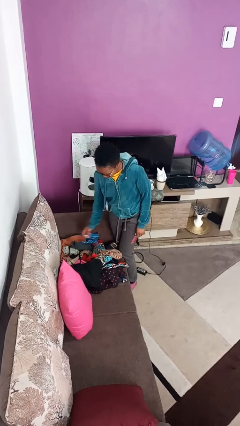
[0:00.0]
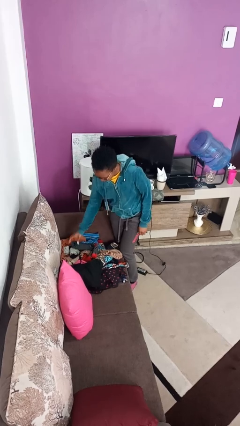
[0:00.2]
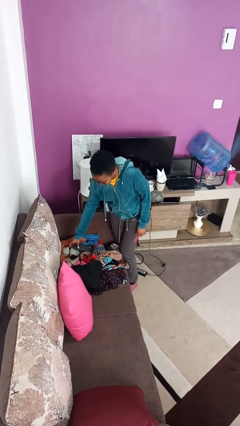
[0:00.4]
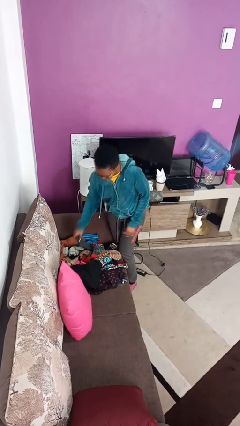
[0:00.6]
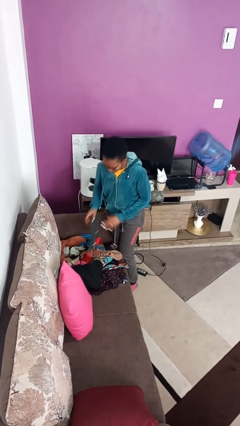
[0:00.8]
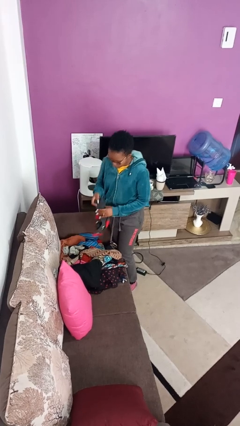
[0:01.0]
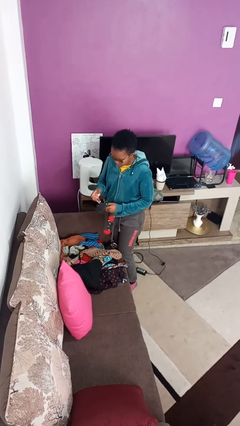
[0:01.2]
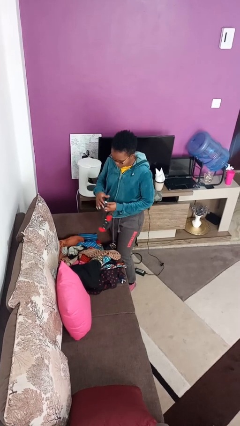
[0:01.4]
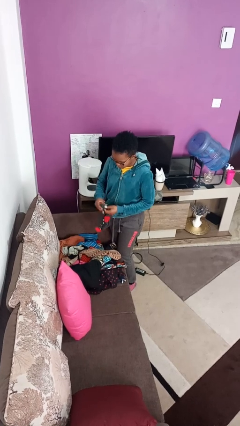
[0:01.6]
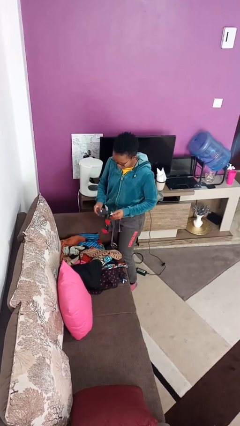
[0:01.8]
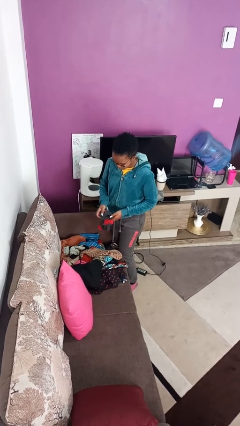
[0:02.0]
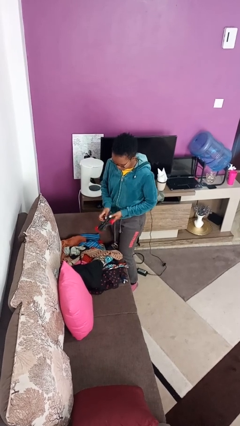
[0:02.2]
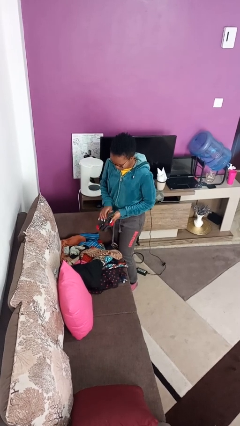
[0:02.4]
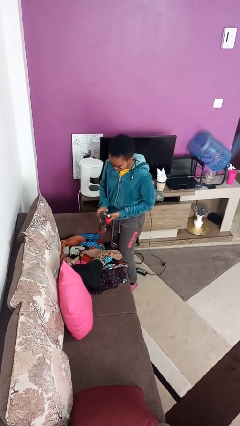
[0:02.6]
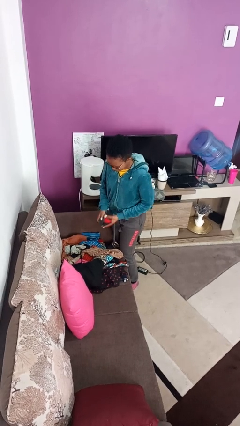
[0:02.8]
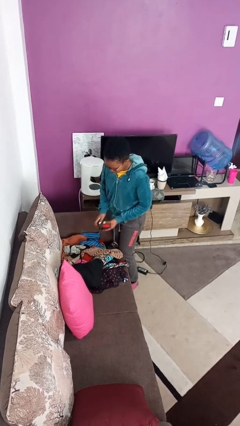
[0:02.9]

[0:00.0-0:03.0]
person folds socks

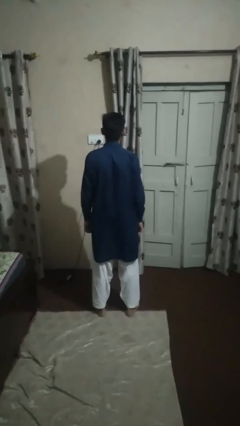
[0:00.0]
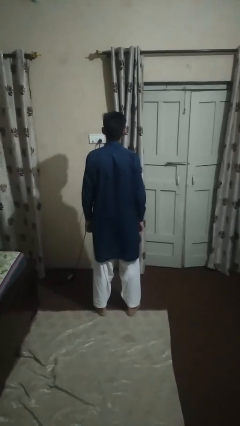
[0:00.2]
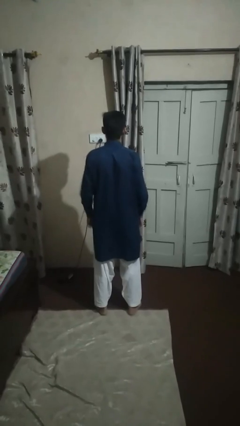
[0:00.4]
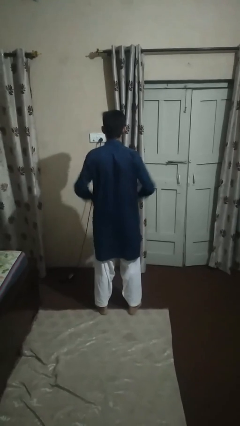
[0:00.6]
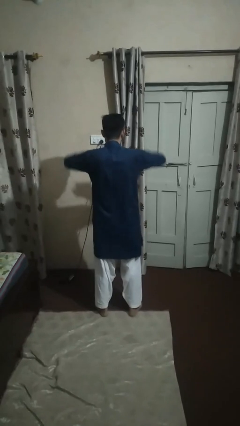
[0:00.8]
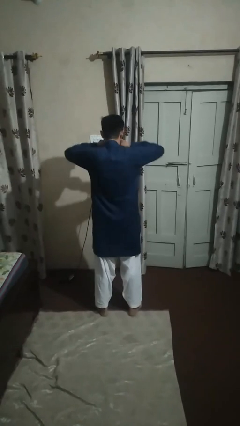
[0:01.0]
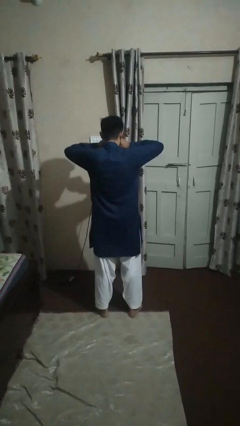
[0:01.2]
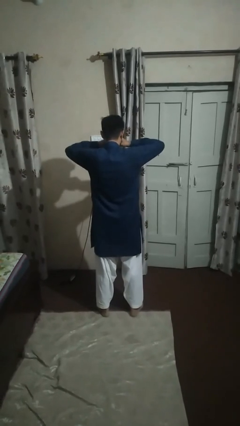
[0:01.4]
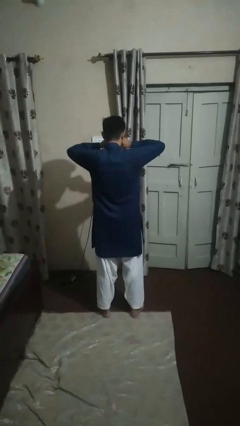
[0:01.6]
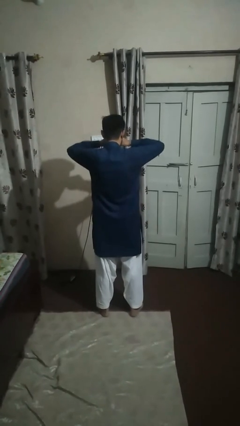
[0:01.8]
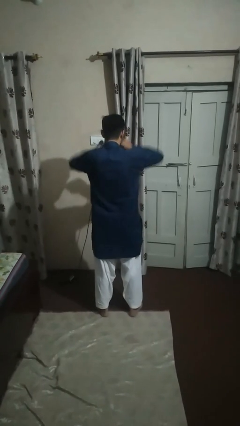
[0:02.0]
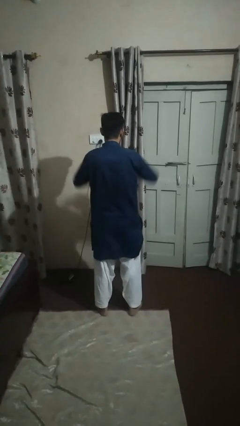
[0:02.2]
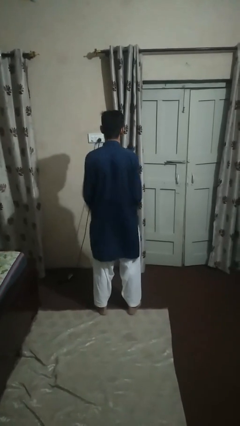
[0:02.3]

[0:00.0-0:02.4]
person rubs eyes

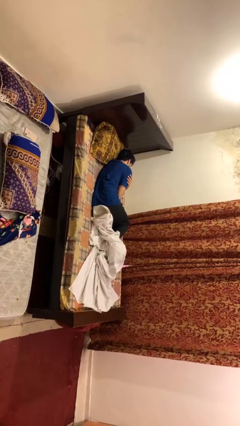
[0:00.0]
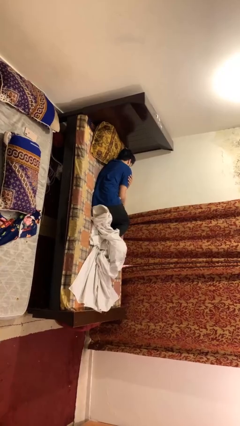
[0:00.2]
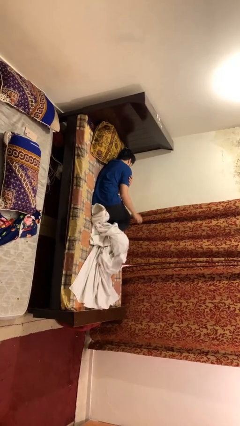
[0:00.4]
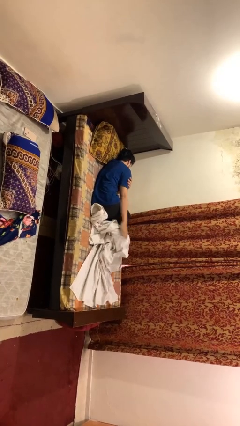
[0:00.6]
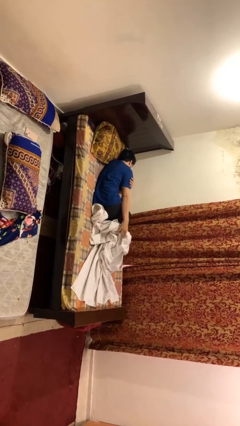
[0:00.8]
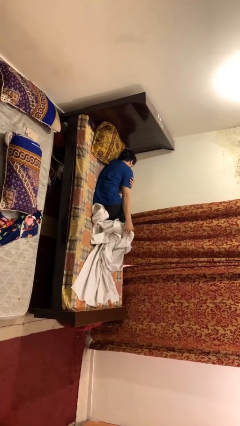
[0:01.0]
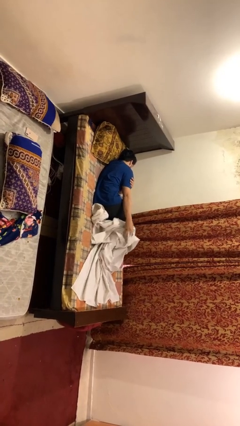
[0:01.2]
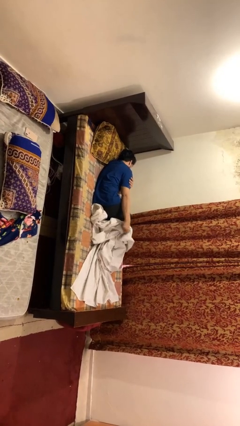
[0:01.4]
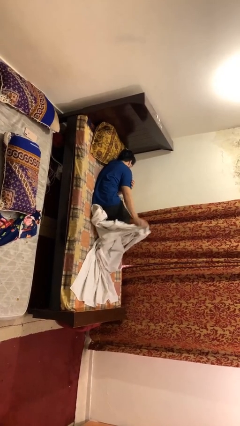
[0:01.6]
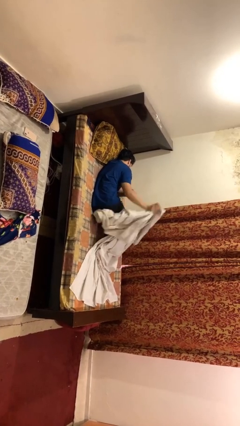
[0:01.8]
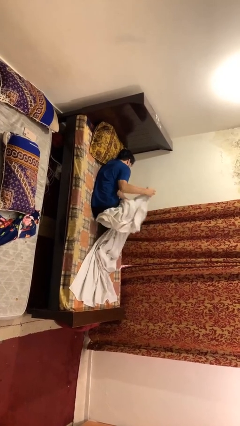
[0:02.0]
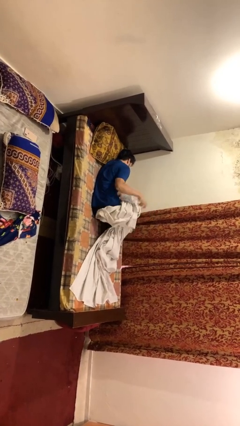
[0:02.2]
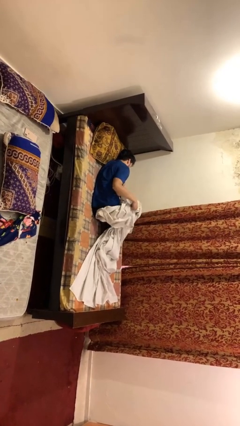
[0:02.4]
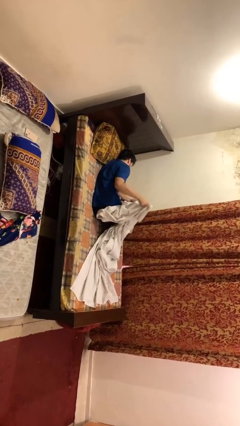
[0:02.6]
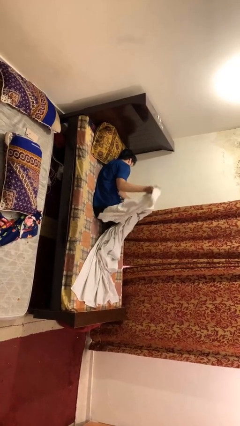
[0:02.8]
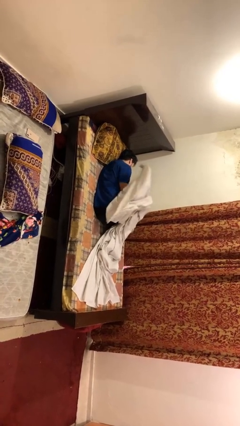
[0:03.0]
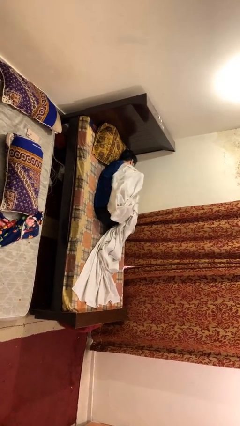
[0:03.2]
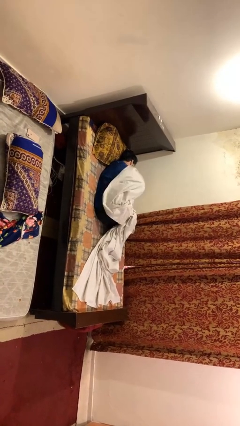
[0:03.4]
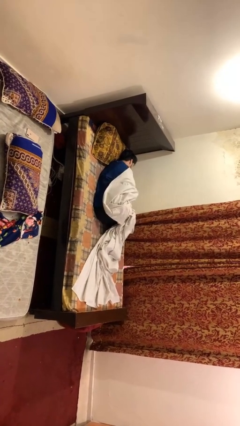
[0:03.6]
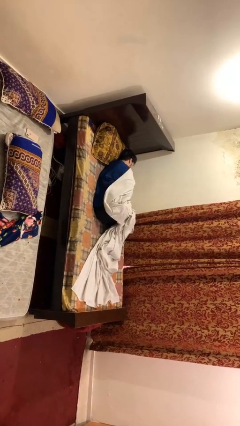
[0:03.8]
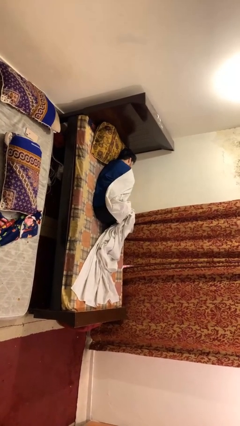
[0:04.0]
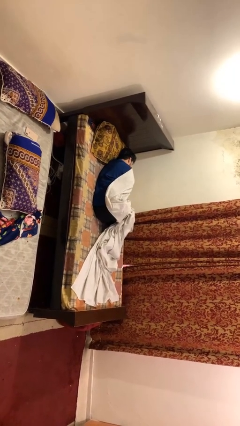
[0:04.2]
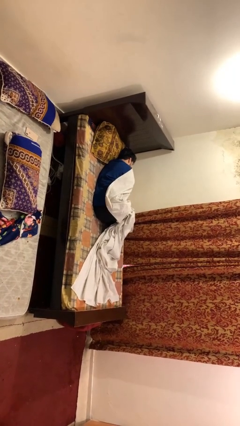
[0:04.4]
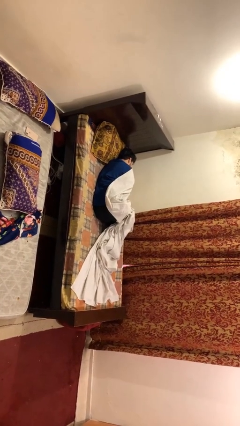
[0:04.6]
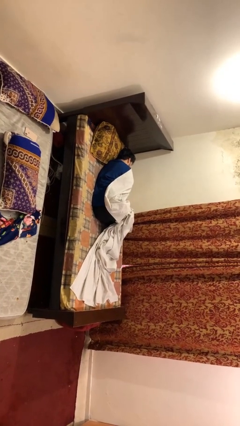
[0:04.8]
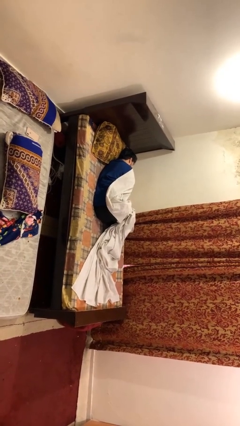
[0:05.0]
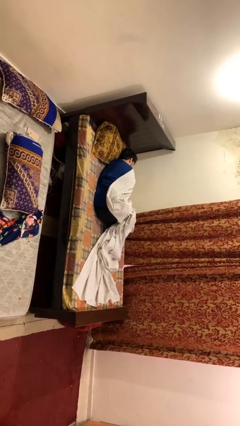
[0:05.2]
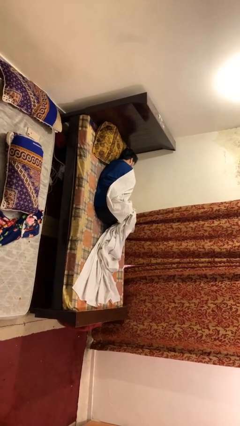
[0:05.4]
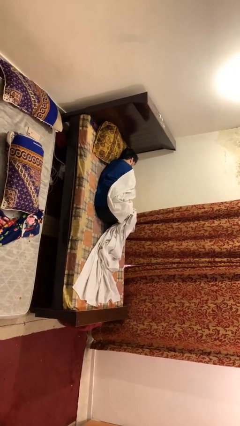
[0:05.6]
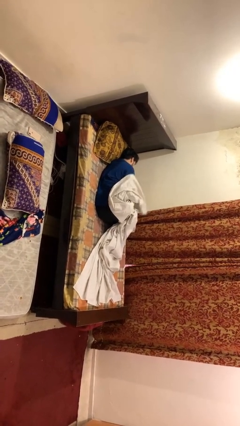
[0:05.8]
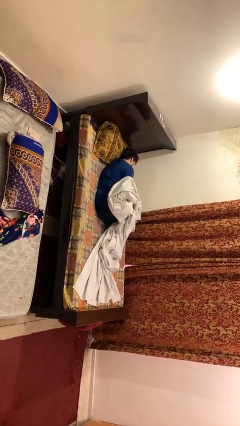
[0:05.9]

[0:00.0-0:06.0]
person covers with bedsheets

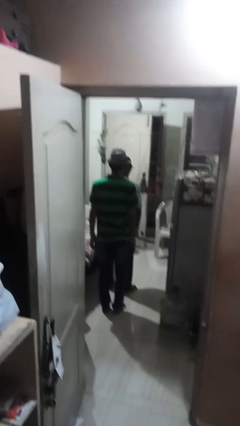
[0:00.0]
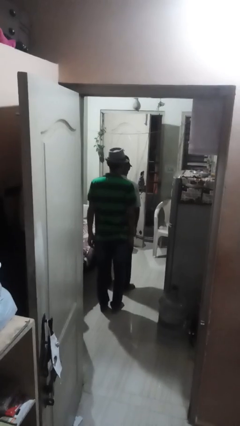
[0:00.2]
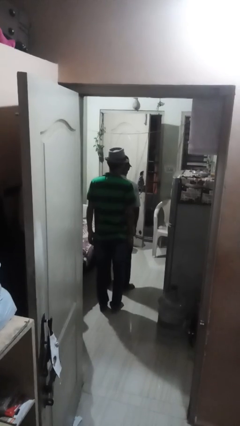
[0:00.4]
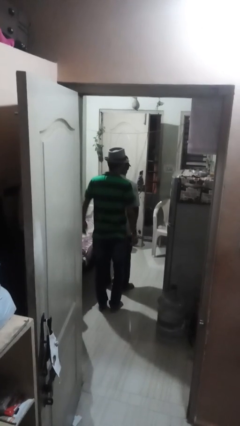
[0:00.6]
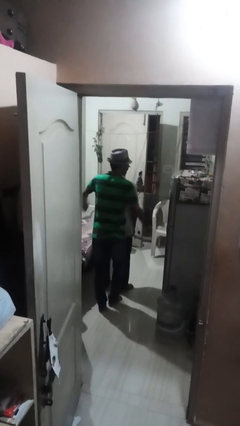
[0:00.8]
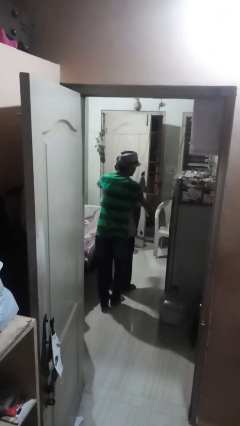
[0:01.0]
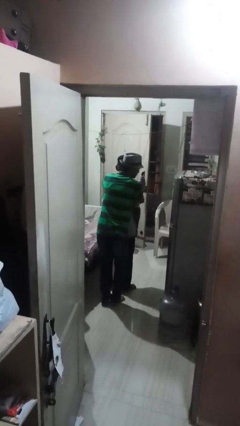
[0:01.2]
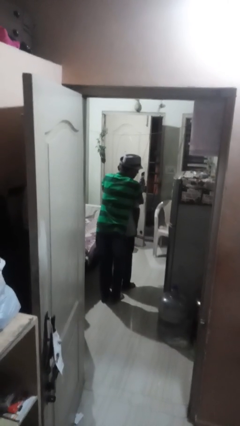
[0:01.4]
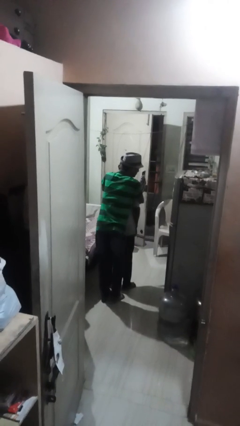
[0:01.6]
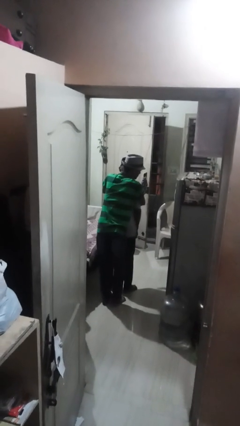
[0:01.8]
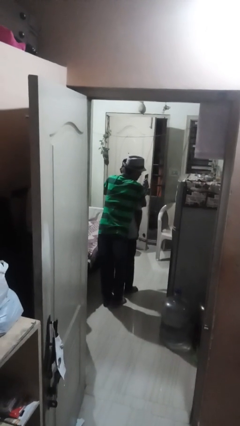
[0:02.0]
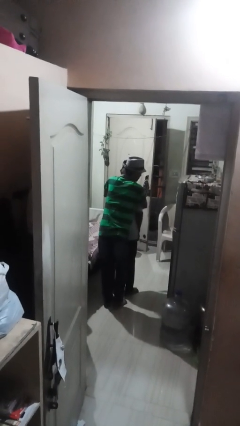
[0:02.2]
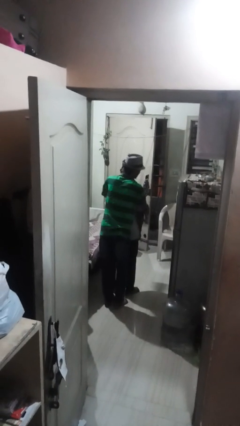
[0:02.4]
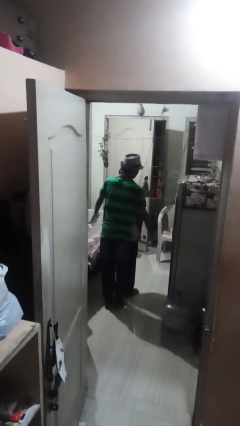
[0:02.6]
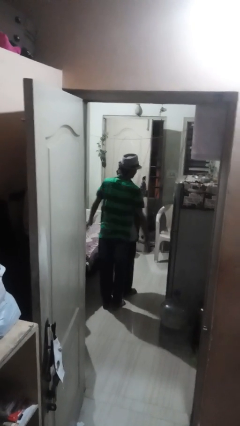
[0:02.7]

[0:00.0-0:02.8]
person hugs person from behind

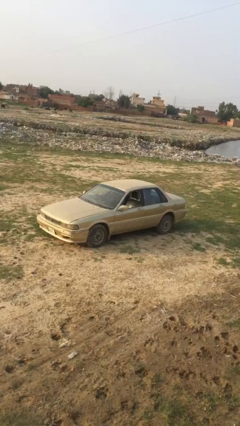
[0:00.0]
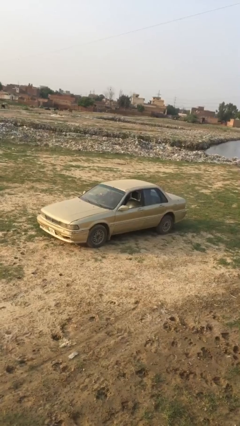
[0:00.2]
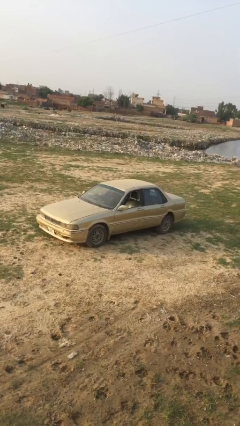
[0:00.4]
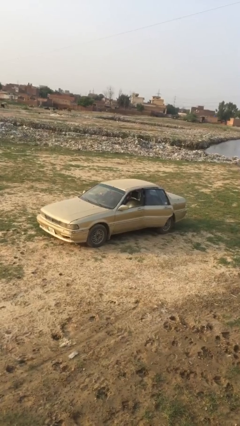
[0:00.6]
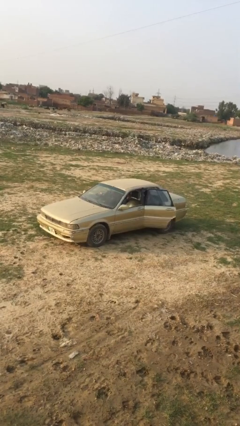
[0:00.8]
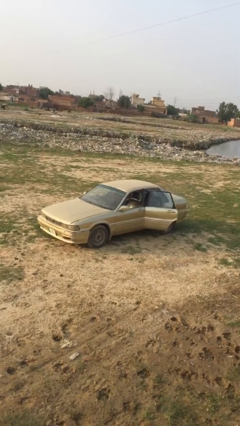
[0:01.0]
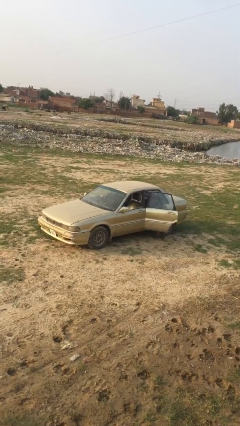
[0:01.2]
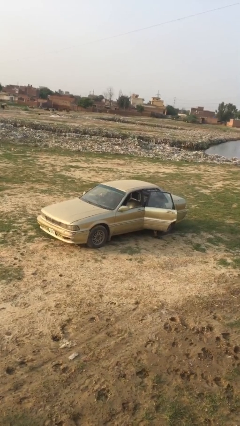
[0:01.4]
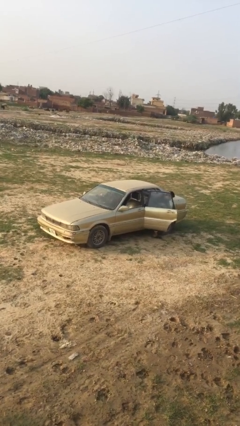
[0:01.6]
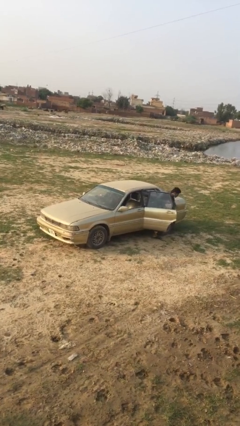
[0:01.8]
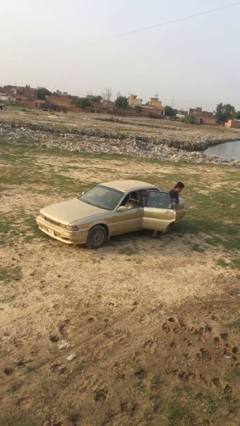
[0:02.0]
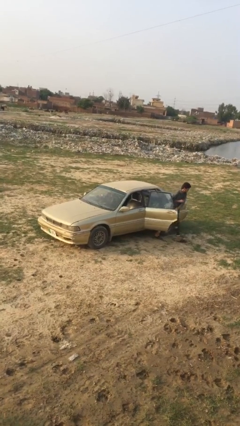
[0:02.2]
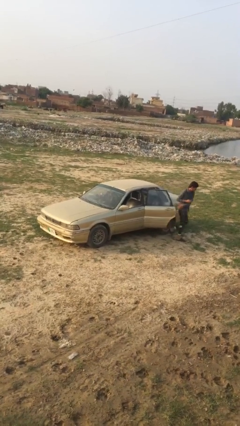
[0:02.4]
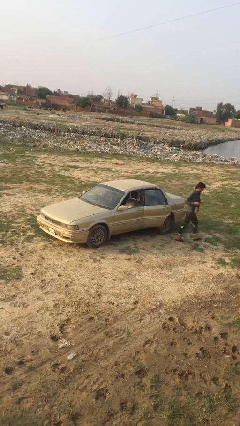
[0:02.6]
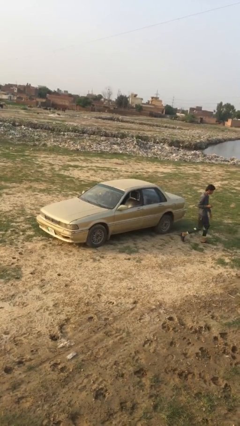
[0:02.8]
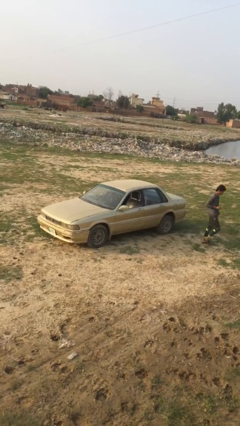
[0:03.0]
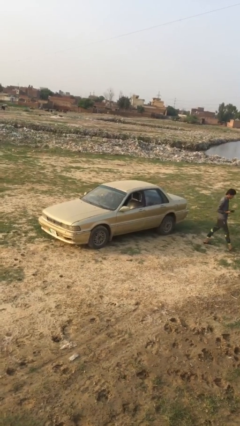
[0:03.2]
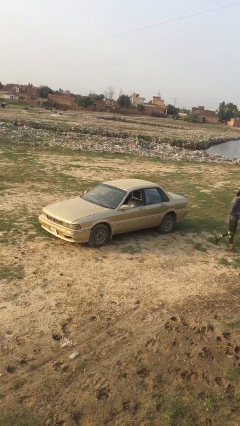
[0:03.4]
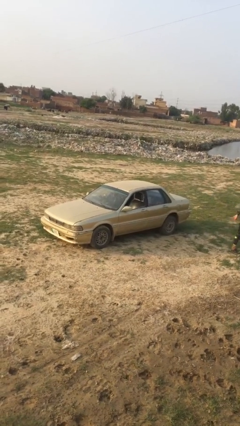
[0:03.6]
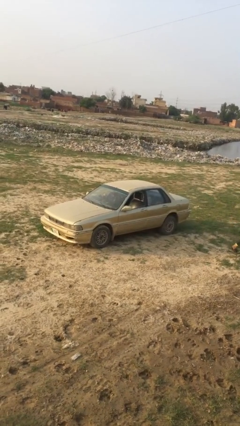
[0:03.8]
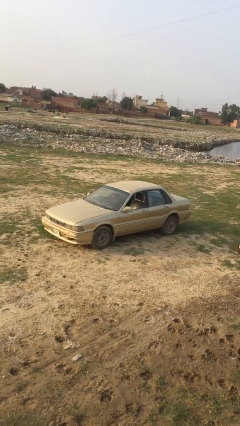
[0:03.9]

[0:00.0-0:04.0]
car drops off person
